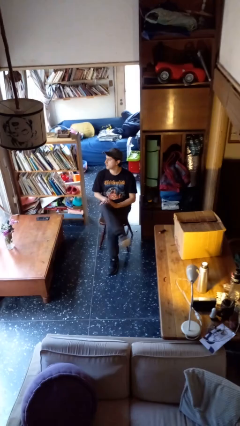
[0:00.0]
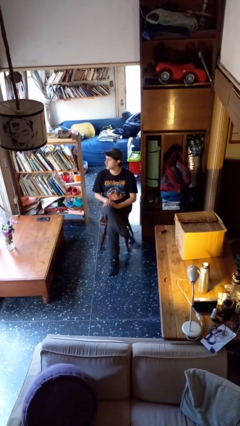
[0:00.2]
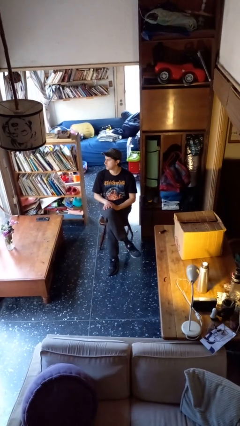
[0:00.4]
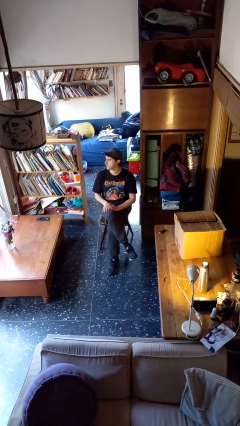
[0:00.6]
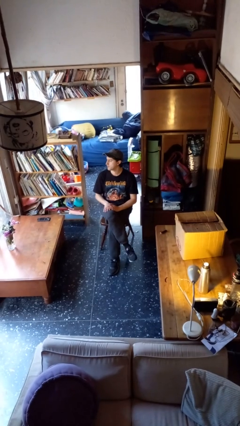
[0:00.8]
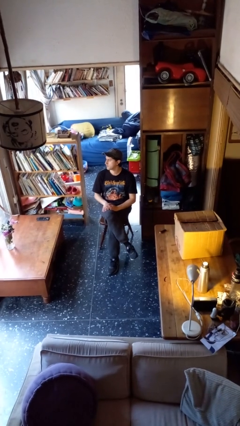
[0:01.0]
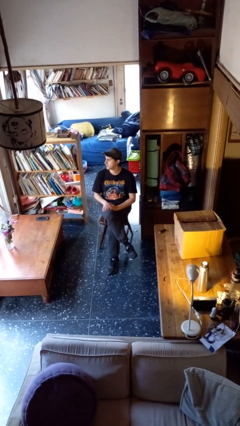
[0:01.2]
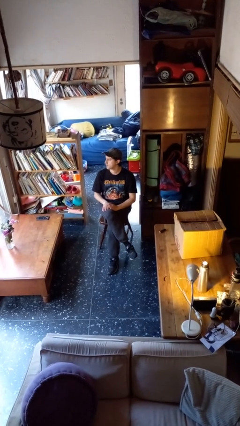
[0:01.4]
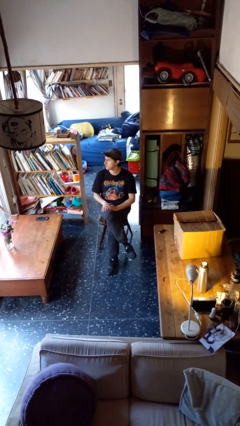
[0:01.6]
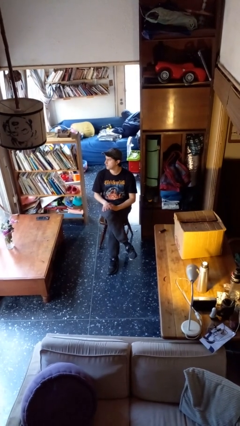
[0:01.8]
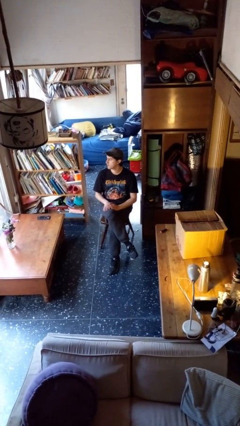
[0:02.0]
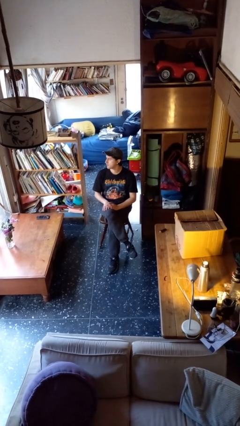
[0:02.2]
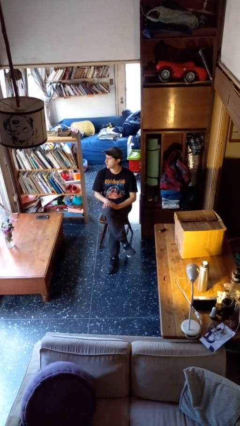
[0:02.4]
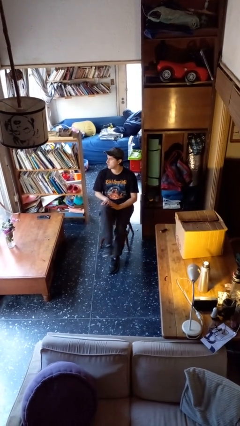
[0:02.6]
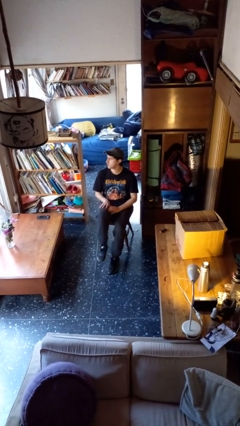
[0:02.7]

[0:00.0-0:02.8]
person crosses legs

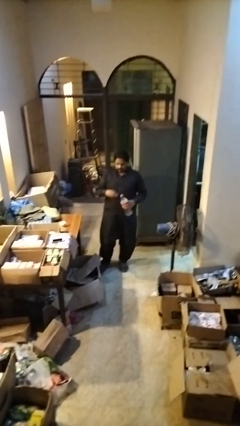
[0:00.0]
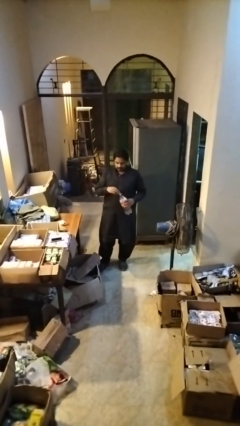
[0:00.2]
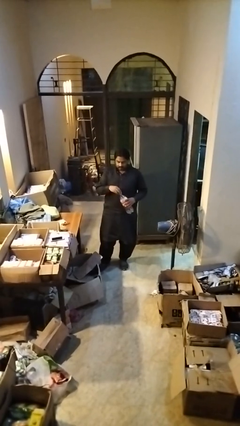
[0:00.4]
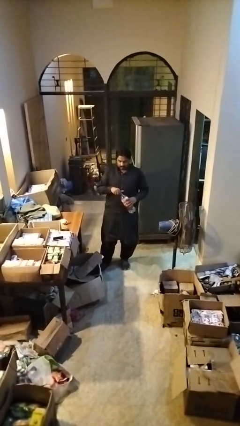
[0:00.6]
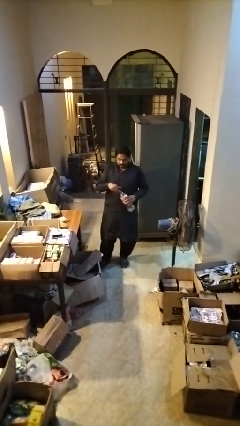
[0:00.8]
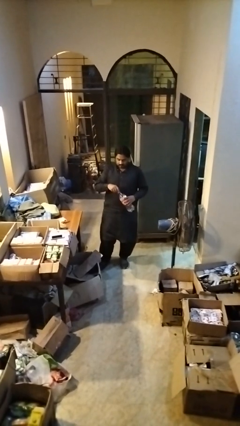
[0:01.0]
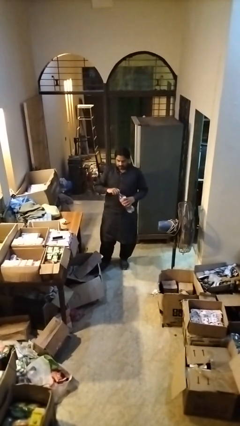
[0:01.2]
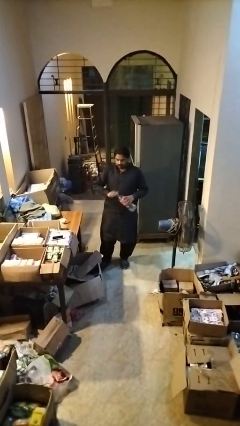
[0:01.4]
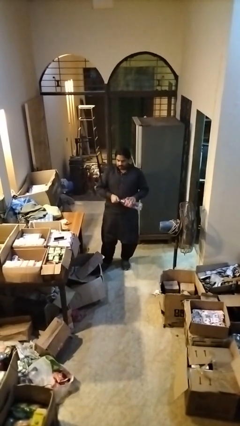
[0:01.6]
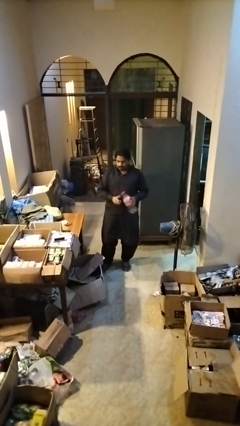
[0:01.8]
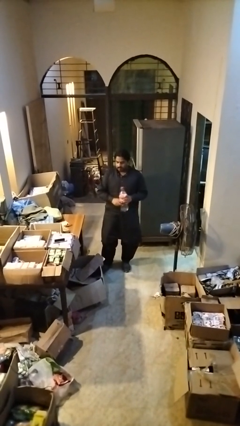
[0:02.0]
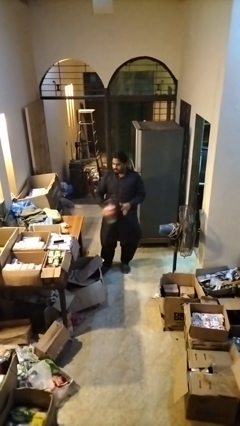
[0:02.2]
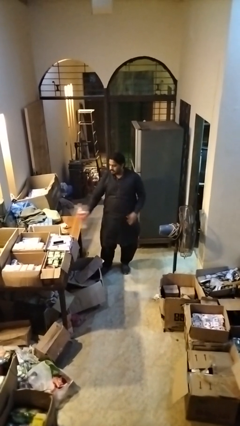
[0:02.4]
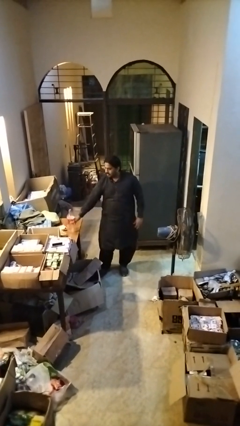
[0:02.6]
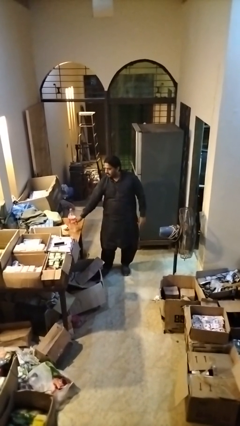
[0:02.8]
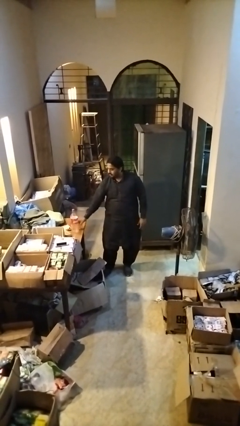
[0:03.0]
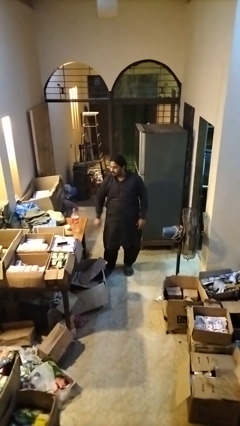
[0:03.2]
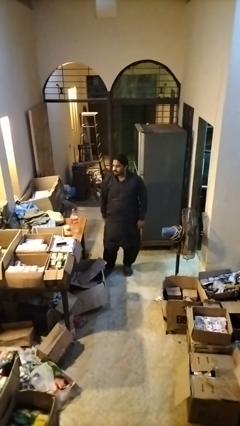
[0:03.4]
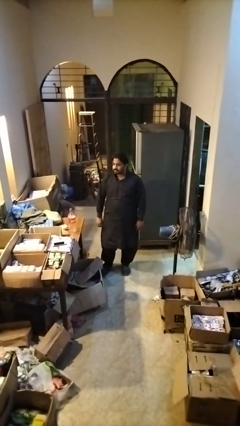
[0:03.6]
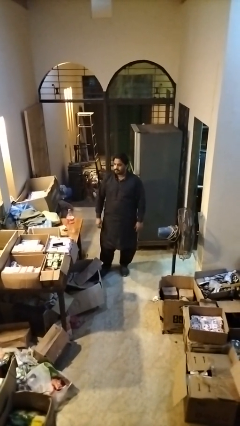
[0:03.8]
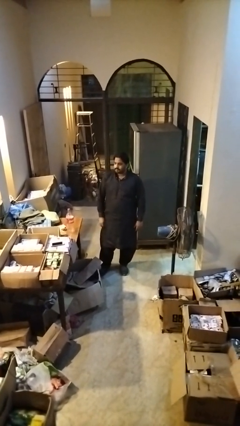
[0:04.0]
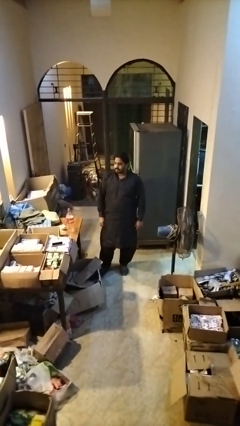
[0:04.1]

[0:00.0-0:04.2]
person screws lid to bottle

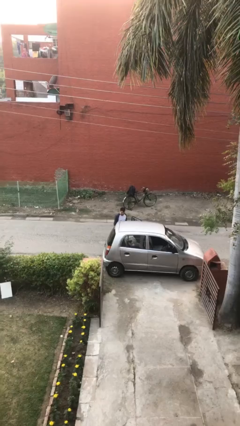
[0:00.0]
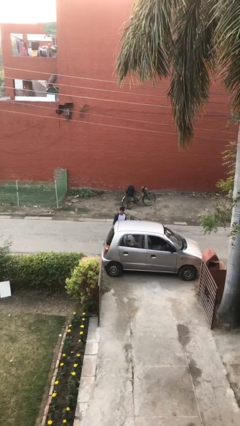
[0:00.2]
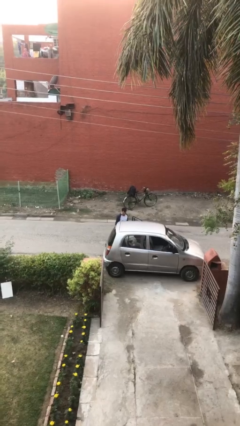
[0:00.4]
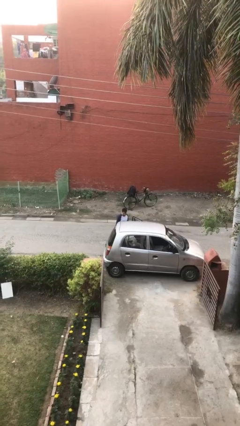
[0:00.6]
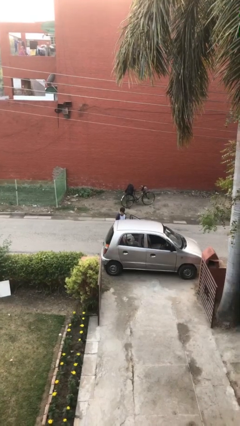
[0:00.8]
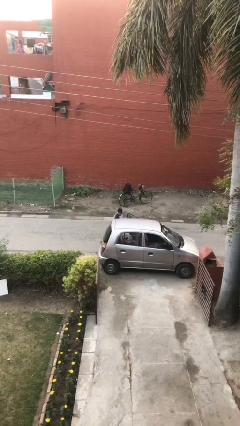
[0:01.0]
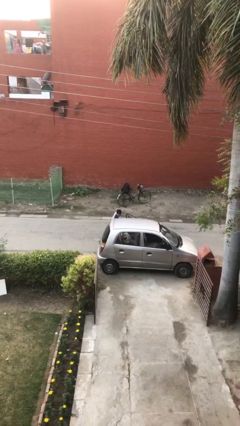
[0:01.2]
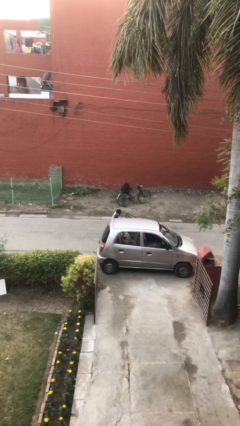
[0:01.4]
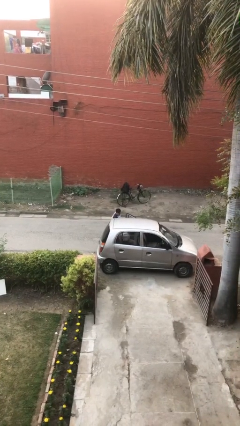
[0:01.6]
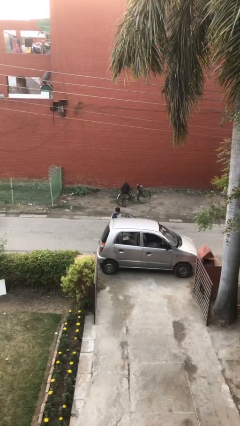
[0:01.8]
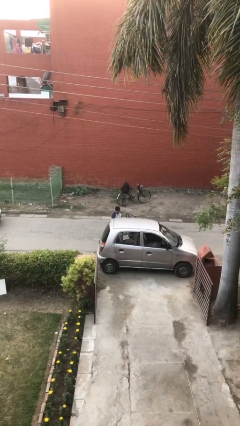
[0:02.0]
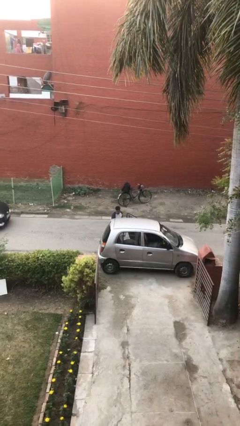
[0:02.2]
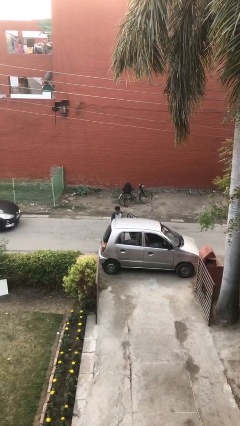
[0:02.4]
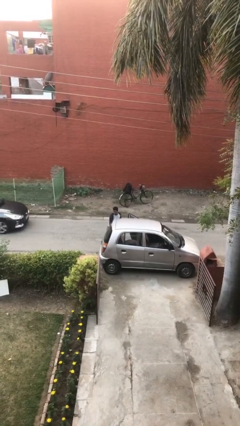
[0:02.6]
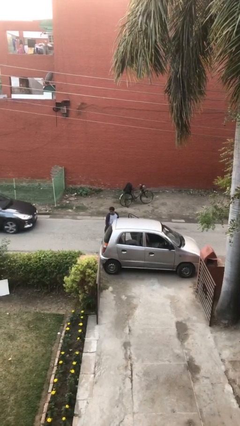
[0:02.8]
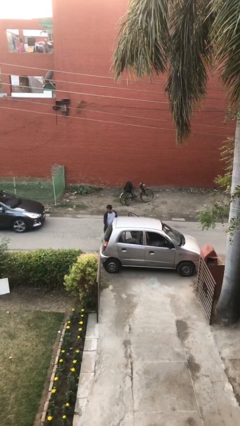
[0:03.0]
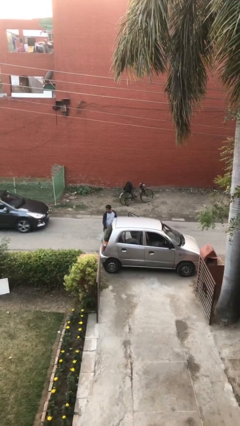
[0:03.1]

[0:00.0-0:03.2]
person unloads car

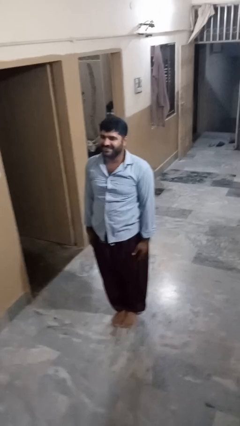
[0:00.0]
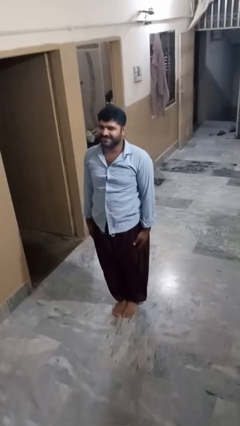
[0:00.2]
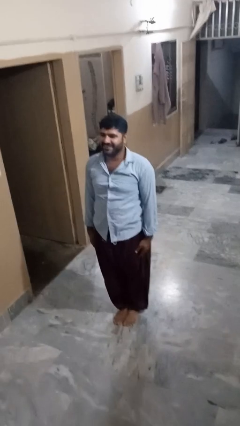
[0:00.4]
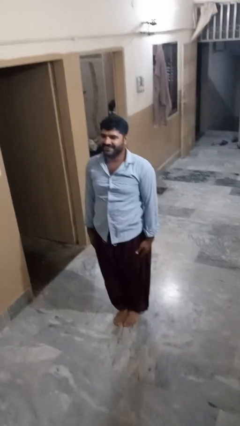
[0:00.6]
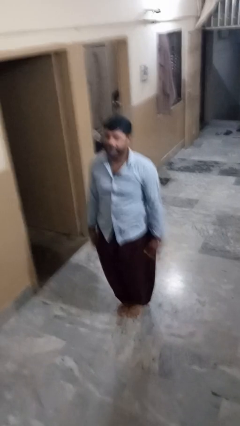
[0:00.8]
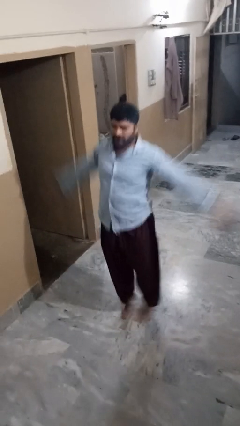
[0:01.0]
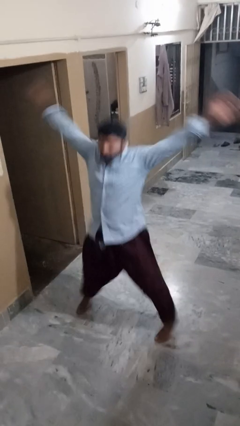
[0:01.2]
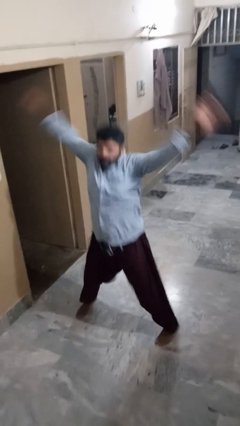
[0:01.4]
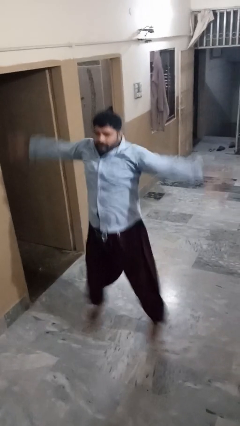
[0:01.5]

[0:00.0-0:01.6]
person exercises with jumping jacks

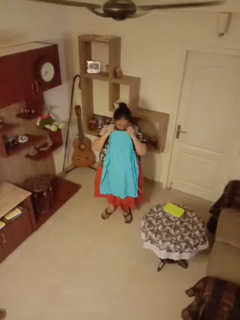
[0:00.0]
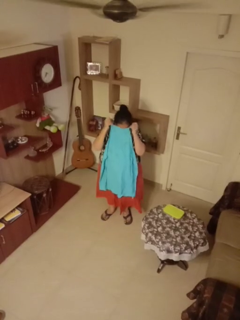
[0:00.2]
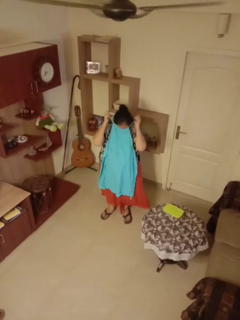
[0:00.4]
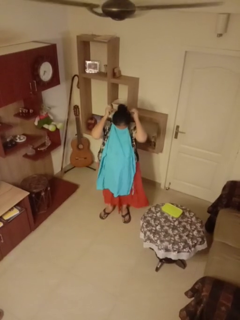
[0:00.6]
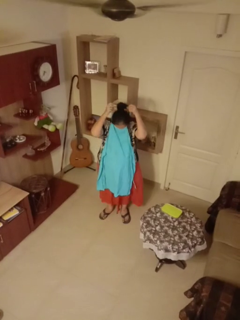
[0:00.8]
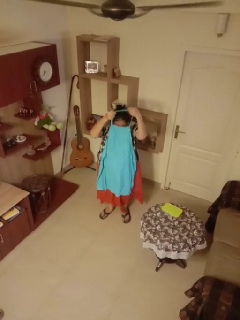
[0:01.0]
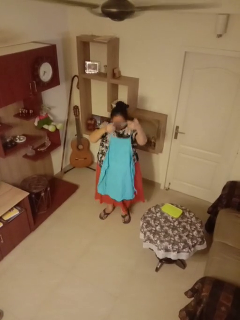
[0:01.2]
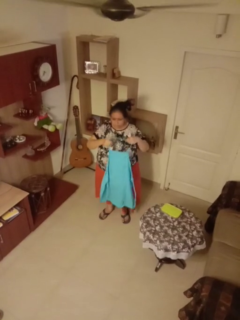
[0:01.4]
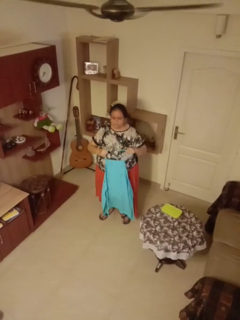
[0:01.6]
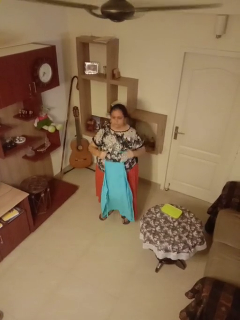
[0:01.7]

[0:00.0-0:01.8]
person takes off apron

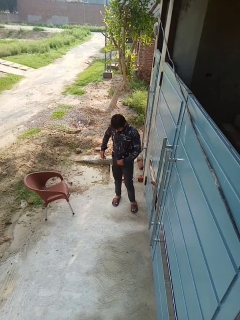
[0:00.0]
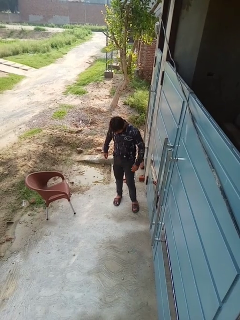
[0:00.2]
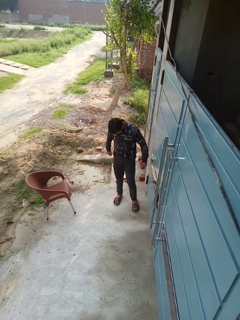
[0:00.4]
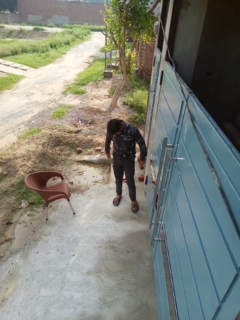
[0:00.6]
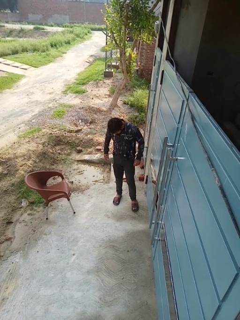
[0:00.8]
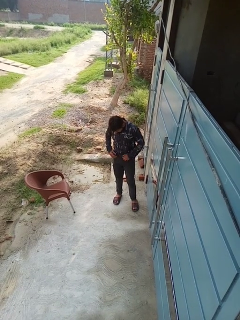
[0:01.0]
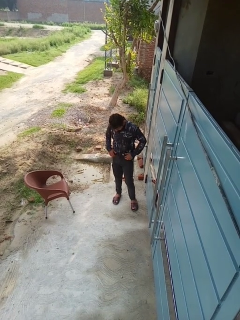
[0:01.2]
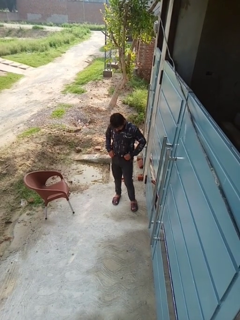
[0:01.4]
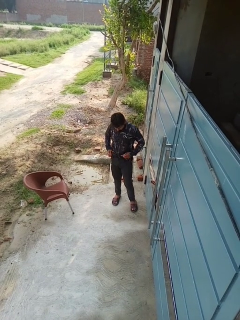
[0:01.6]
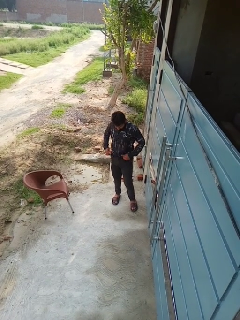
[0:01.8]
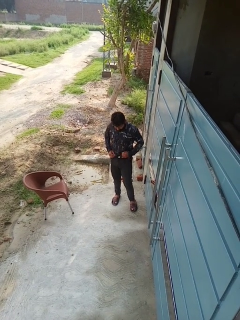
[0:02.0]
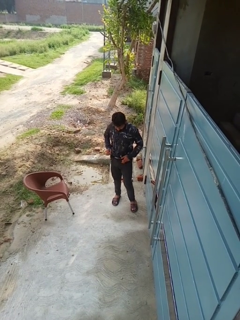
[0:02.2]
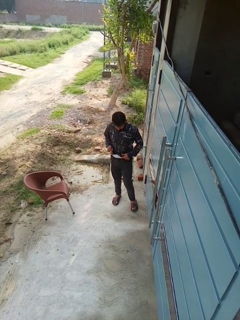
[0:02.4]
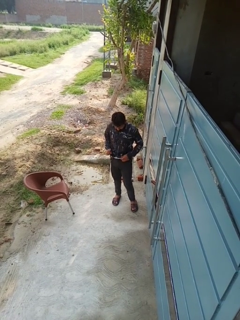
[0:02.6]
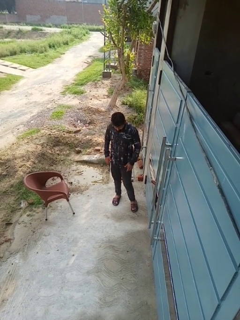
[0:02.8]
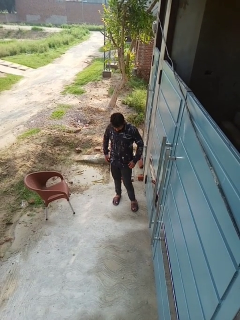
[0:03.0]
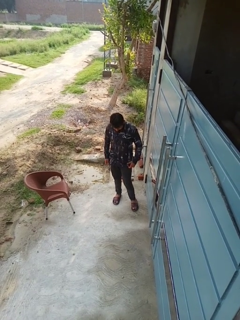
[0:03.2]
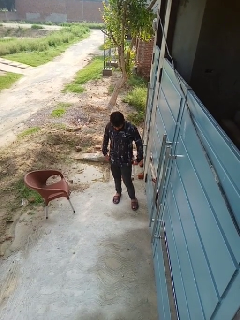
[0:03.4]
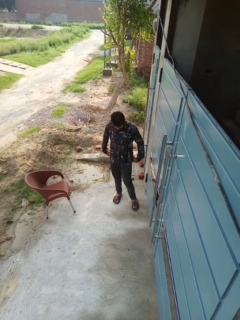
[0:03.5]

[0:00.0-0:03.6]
person untucks shirt

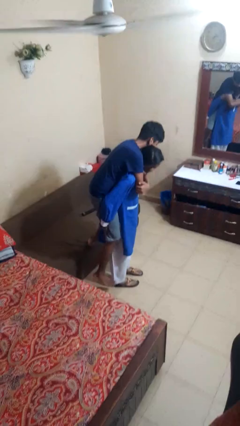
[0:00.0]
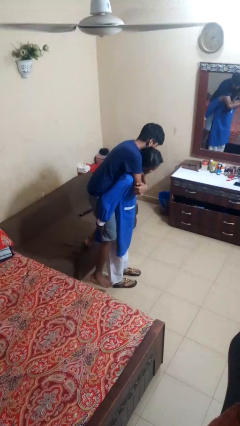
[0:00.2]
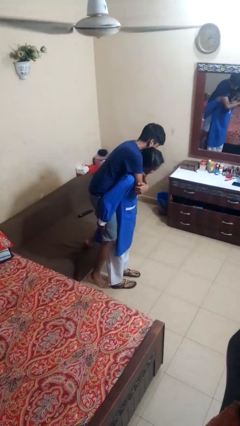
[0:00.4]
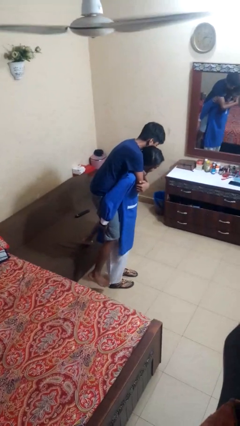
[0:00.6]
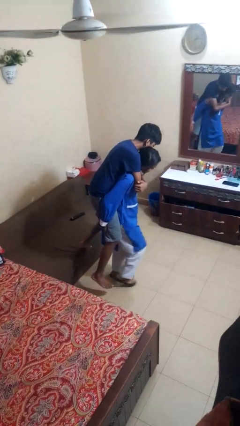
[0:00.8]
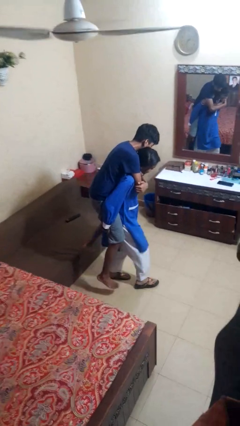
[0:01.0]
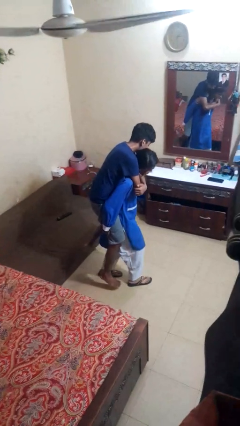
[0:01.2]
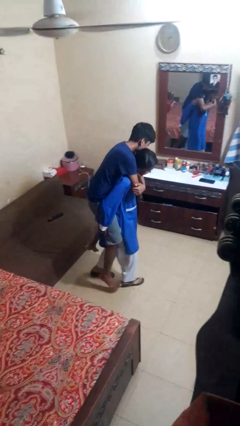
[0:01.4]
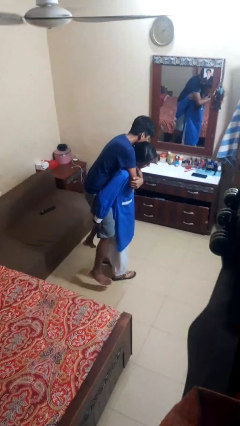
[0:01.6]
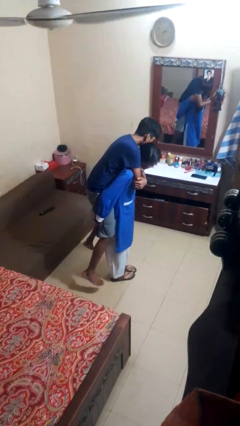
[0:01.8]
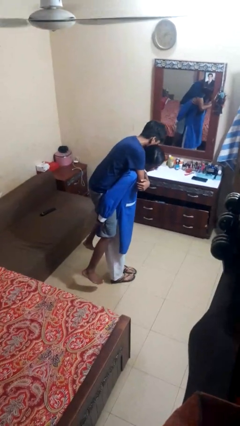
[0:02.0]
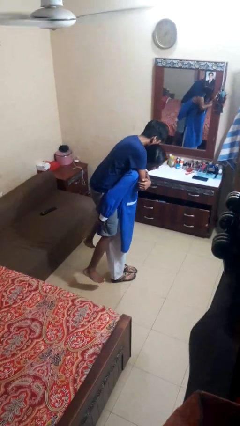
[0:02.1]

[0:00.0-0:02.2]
person carries person on back
